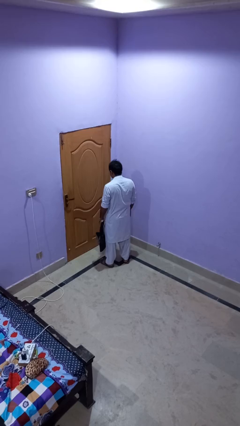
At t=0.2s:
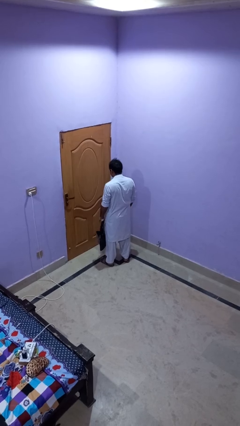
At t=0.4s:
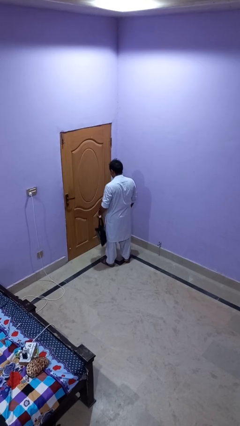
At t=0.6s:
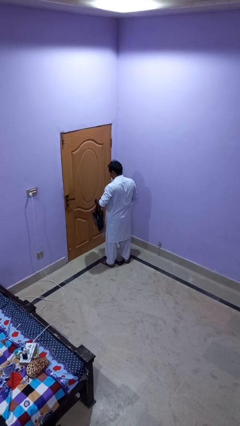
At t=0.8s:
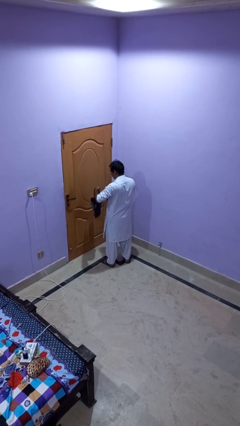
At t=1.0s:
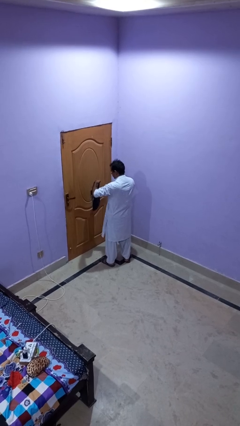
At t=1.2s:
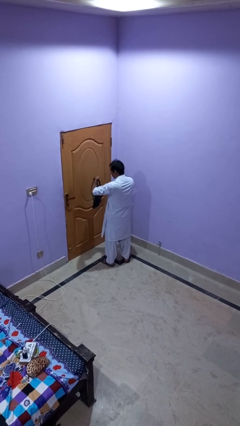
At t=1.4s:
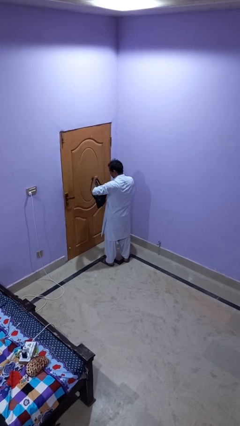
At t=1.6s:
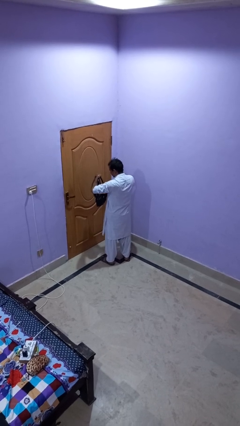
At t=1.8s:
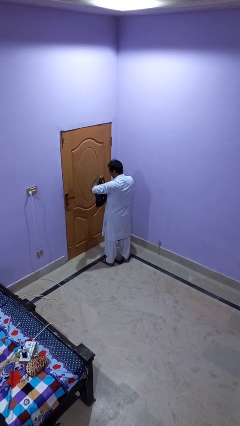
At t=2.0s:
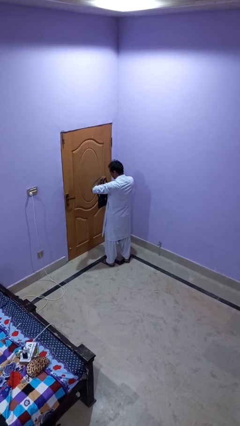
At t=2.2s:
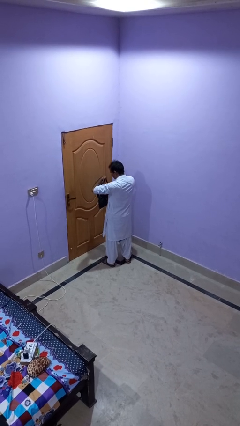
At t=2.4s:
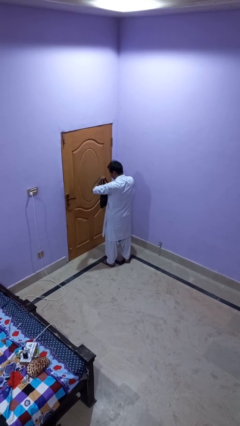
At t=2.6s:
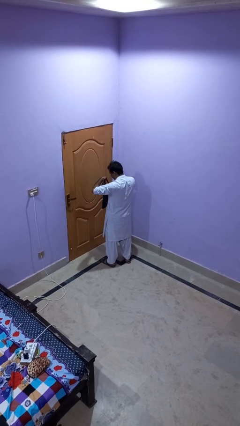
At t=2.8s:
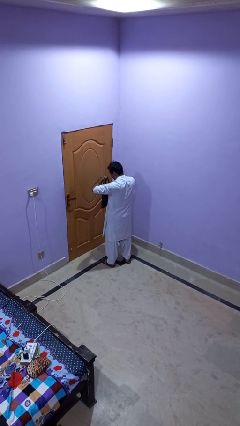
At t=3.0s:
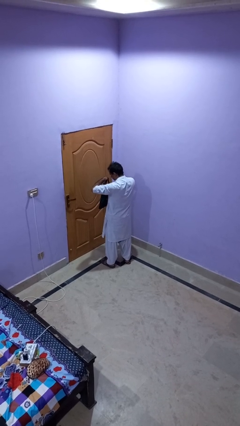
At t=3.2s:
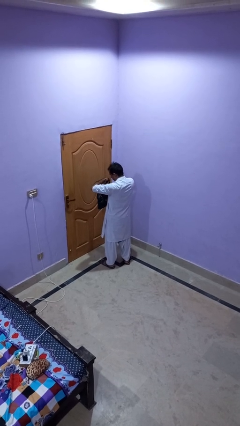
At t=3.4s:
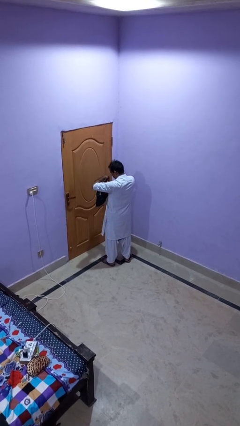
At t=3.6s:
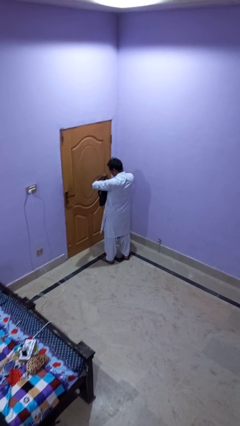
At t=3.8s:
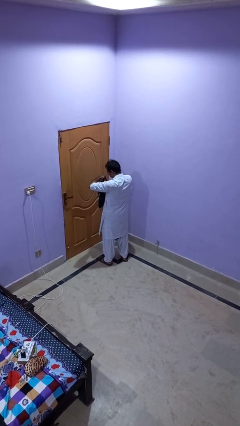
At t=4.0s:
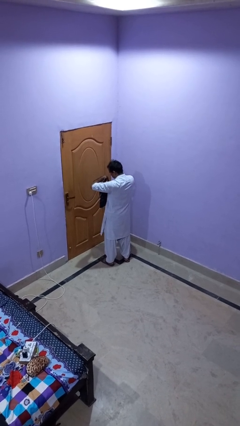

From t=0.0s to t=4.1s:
person searches in purse

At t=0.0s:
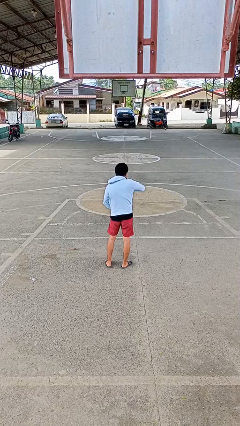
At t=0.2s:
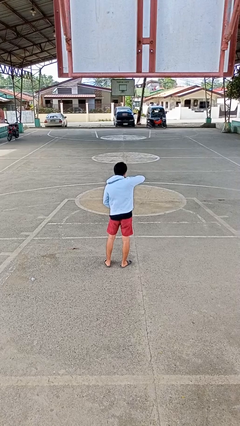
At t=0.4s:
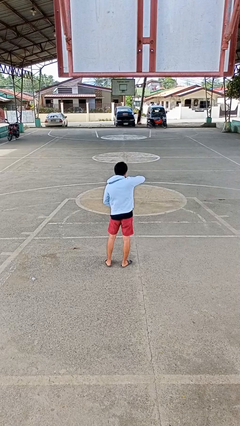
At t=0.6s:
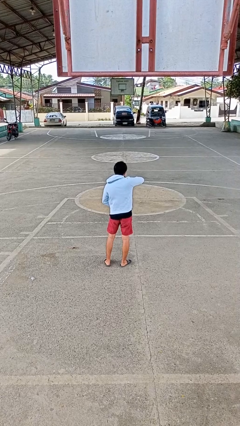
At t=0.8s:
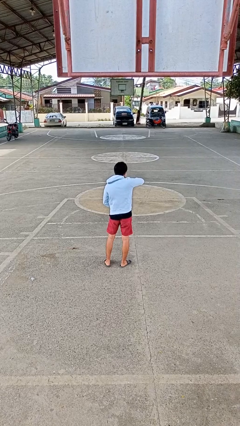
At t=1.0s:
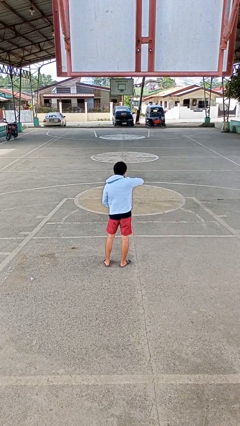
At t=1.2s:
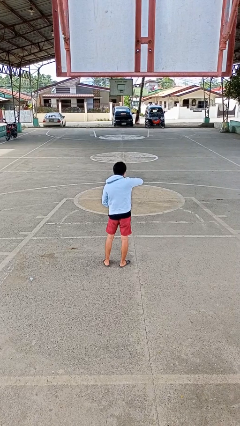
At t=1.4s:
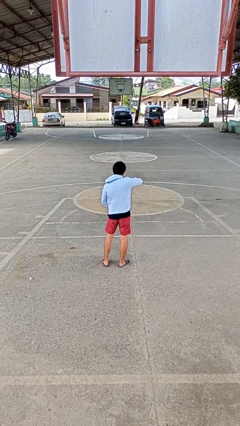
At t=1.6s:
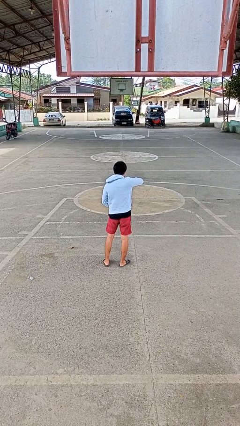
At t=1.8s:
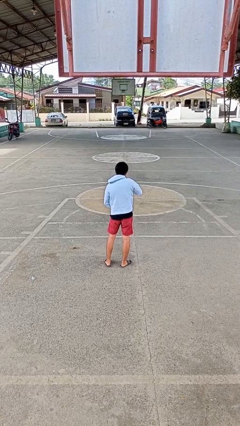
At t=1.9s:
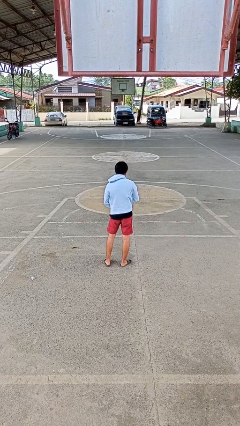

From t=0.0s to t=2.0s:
person zips up jacket

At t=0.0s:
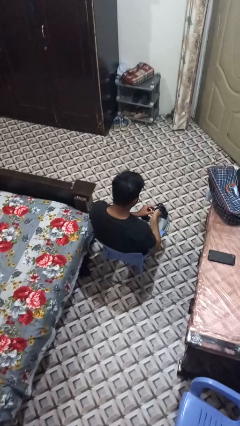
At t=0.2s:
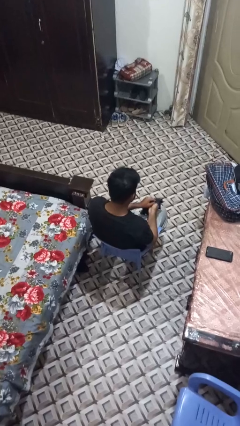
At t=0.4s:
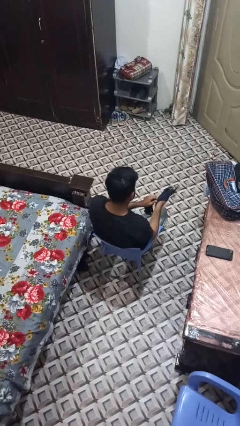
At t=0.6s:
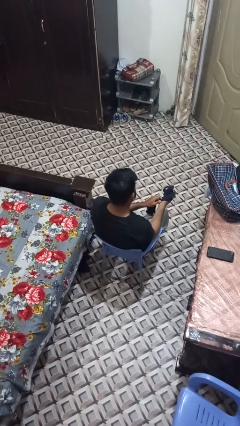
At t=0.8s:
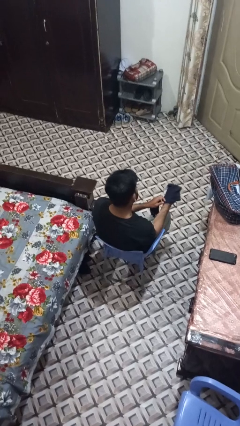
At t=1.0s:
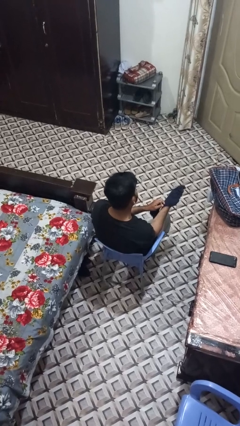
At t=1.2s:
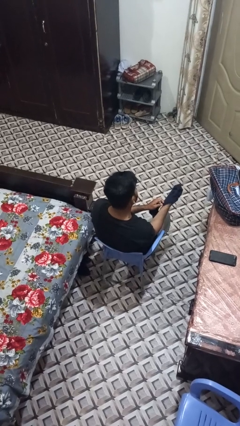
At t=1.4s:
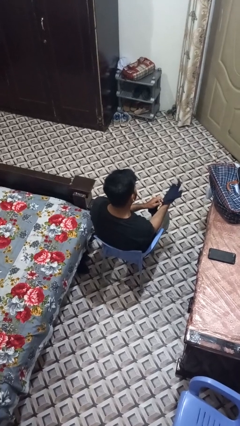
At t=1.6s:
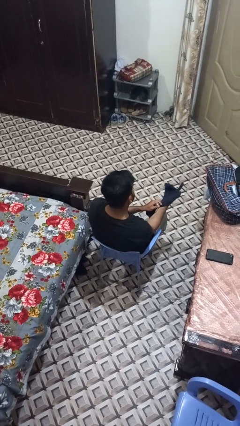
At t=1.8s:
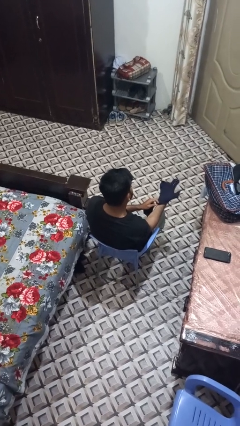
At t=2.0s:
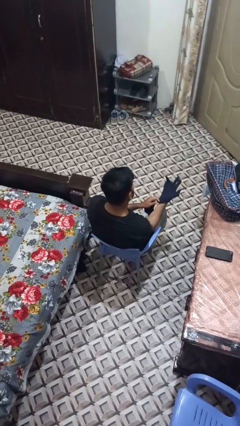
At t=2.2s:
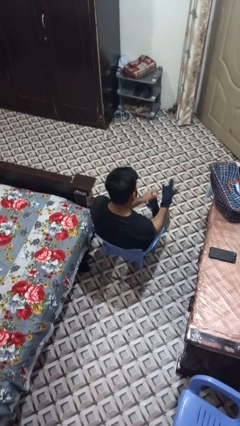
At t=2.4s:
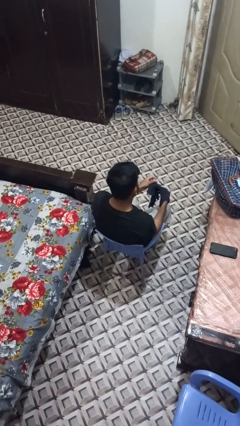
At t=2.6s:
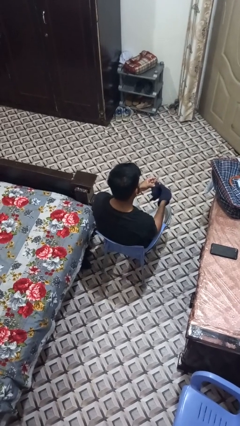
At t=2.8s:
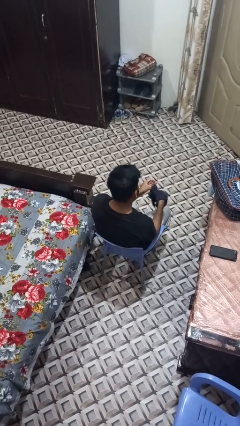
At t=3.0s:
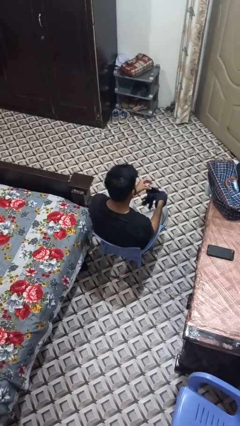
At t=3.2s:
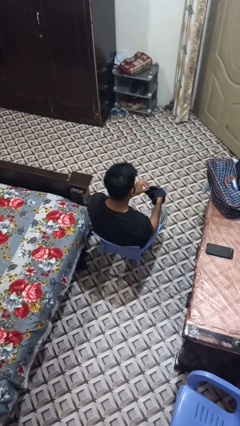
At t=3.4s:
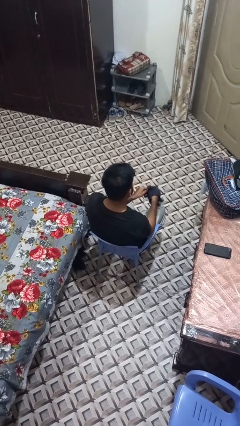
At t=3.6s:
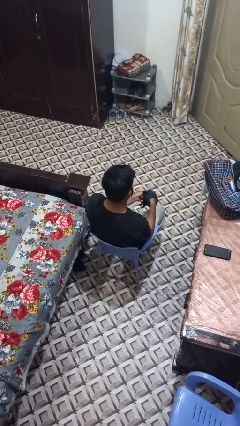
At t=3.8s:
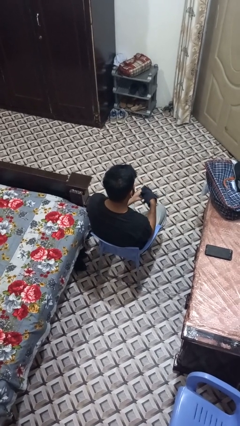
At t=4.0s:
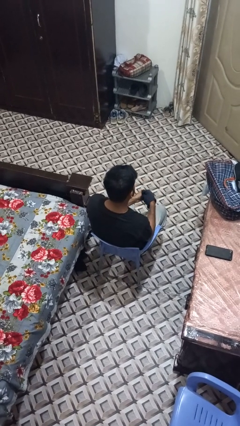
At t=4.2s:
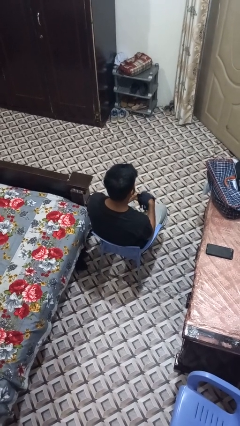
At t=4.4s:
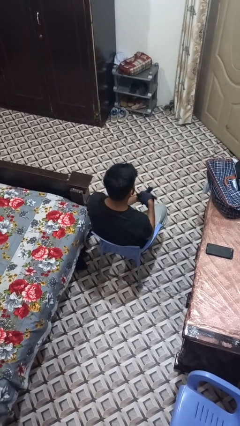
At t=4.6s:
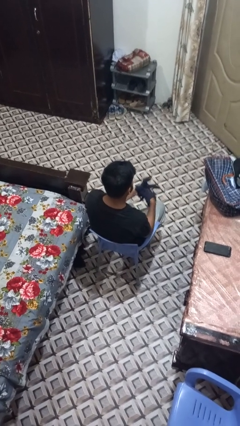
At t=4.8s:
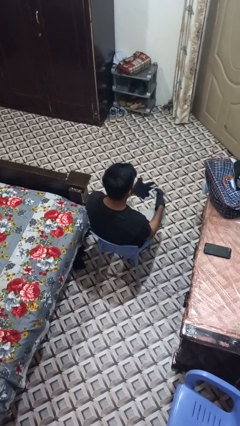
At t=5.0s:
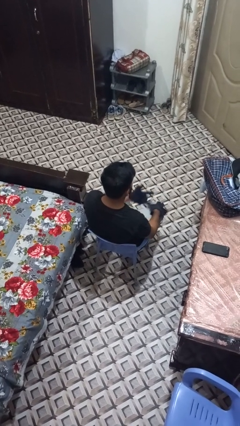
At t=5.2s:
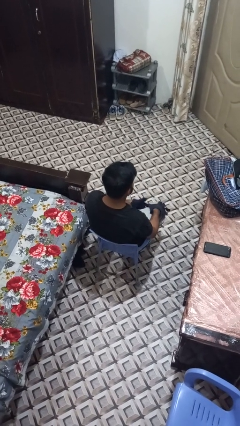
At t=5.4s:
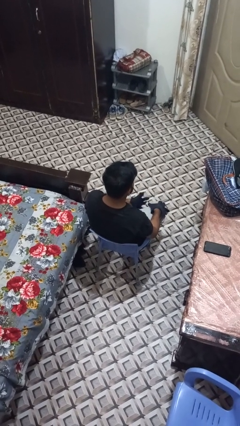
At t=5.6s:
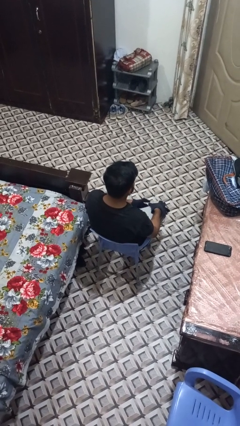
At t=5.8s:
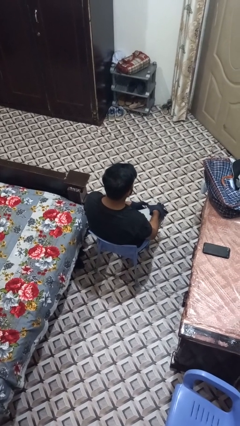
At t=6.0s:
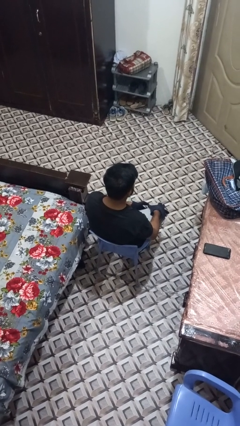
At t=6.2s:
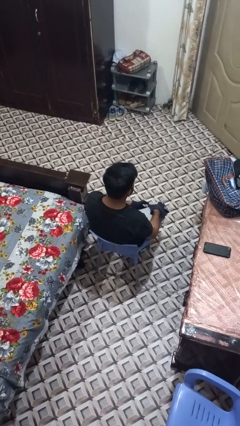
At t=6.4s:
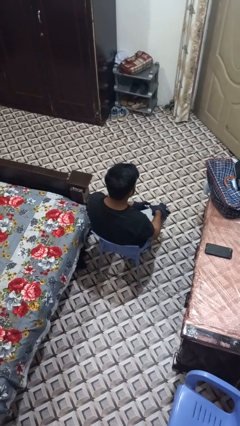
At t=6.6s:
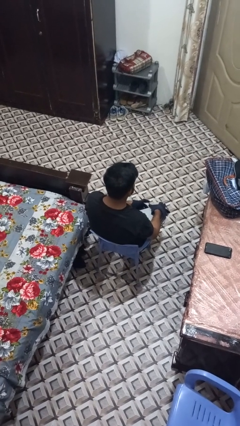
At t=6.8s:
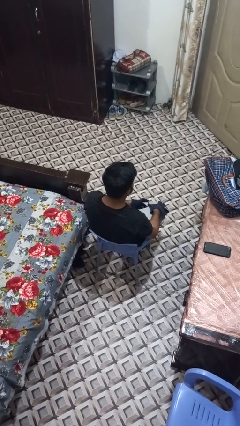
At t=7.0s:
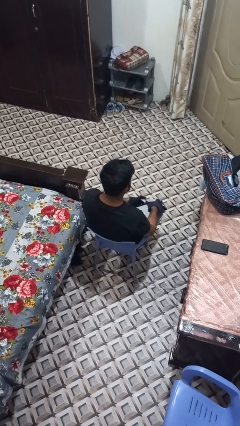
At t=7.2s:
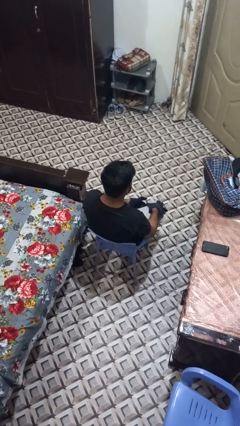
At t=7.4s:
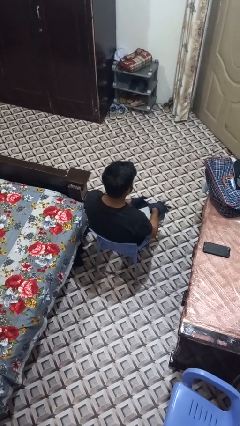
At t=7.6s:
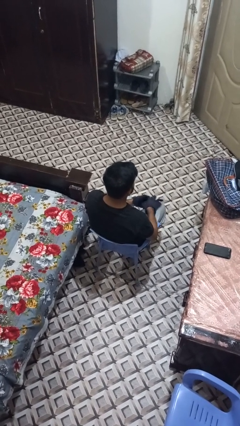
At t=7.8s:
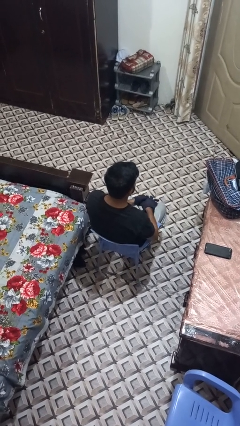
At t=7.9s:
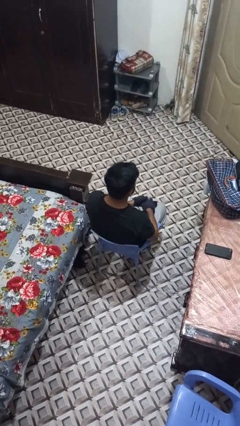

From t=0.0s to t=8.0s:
person puts on gloves

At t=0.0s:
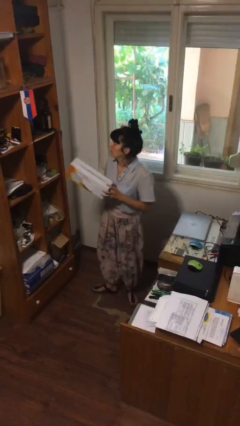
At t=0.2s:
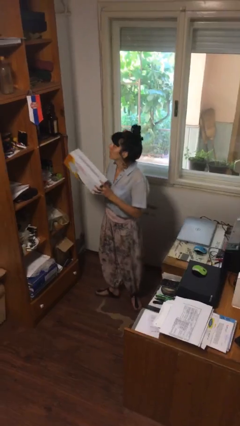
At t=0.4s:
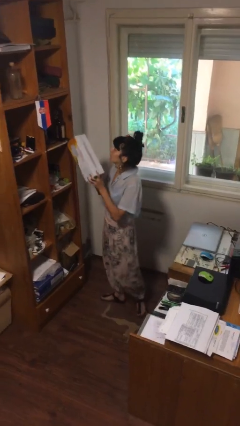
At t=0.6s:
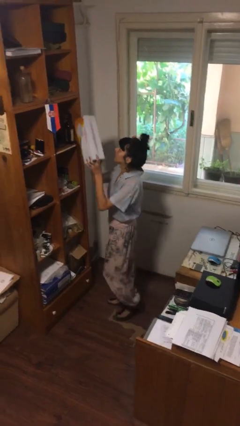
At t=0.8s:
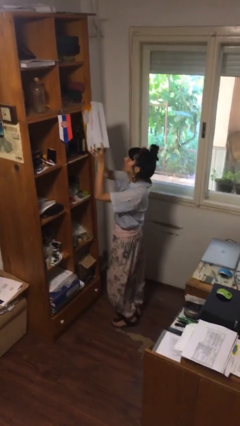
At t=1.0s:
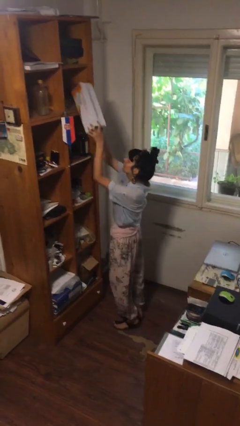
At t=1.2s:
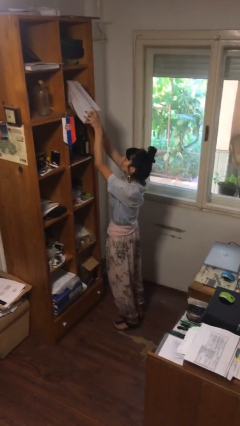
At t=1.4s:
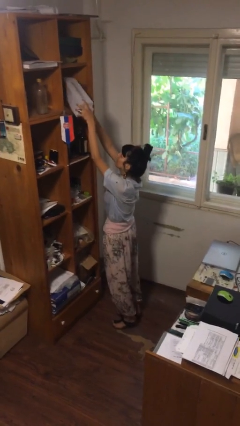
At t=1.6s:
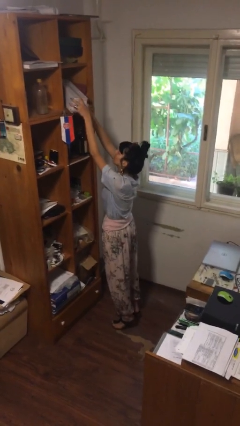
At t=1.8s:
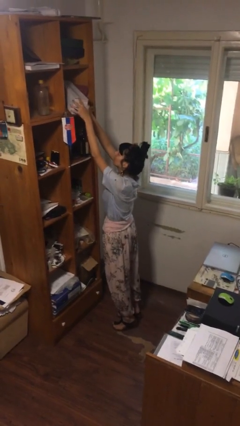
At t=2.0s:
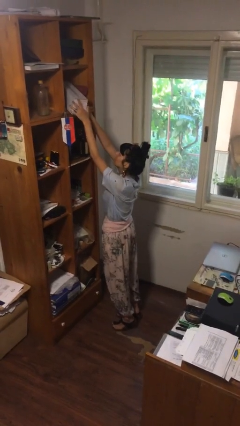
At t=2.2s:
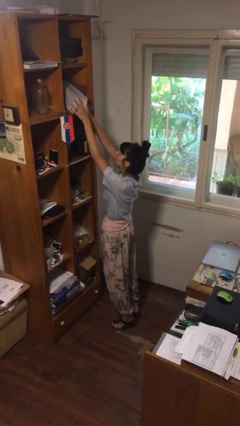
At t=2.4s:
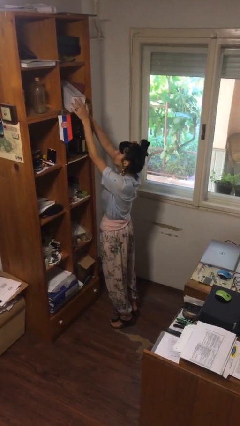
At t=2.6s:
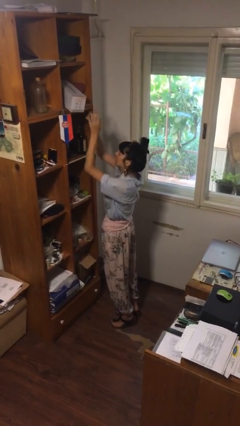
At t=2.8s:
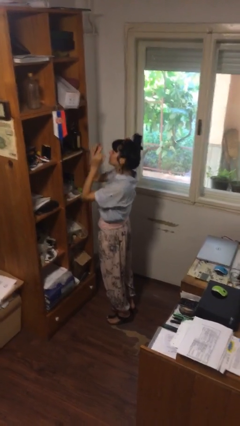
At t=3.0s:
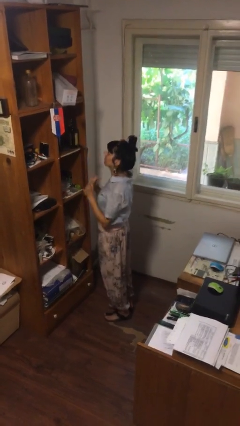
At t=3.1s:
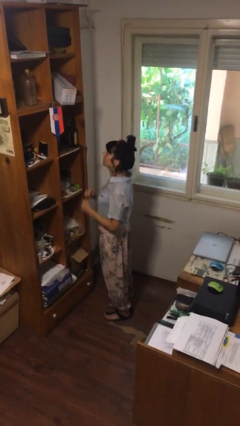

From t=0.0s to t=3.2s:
person puts down object on shelf

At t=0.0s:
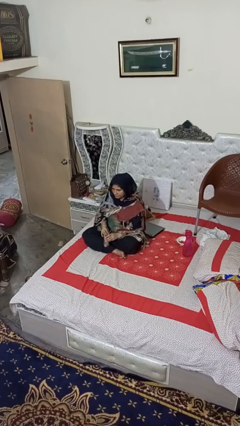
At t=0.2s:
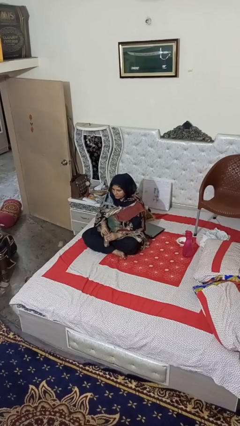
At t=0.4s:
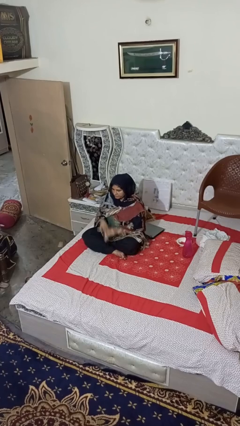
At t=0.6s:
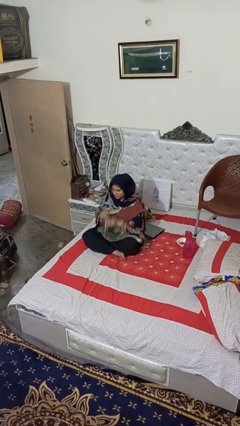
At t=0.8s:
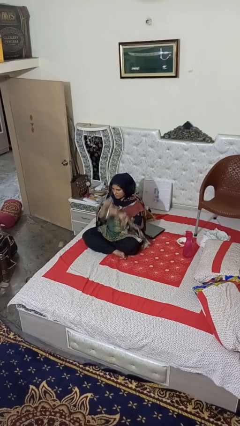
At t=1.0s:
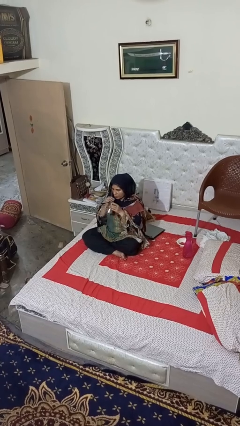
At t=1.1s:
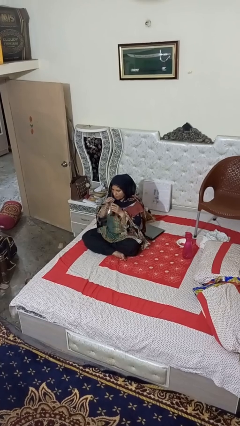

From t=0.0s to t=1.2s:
person drinks from straw
